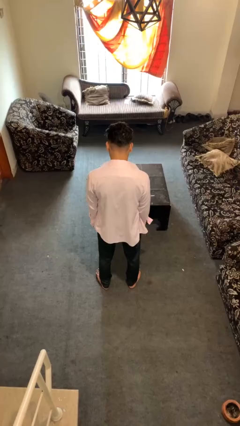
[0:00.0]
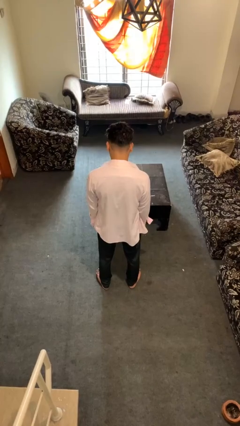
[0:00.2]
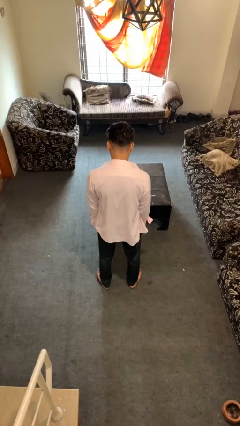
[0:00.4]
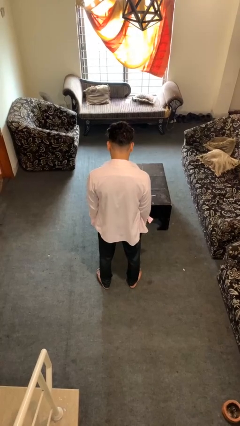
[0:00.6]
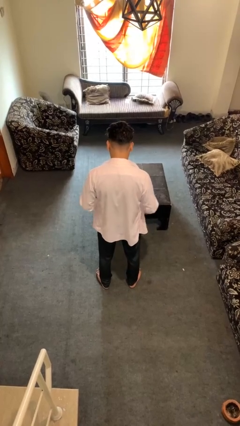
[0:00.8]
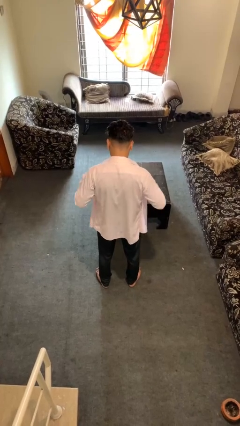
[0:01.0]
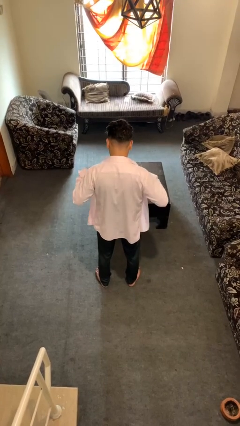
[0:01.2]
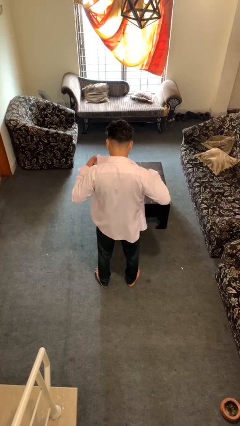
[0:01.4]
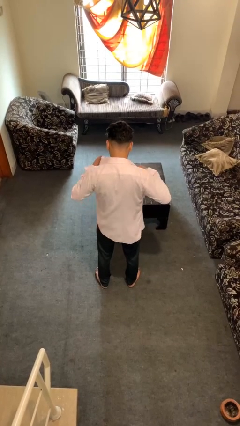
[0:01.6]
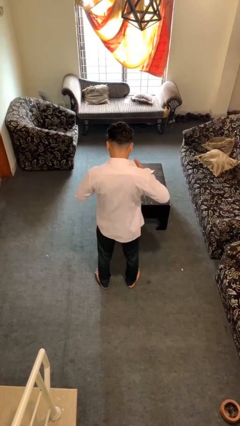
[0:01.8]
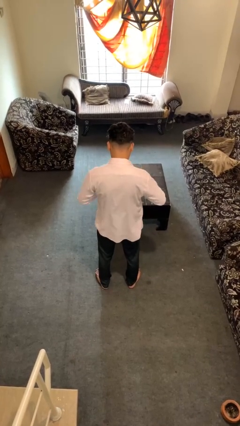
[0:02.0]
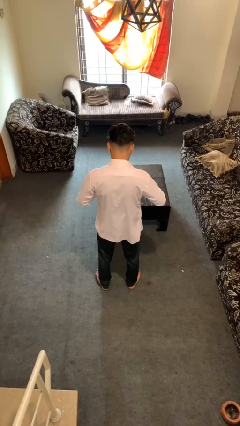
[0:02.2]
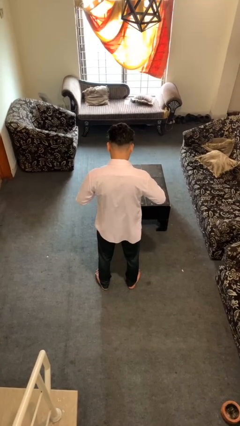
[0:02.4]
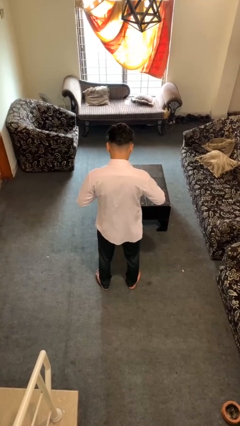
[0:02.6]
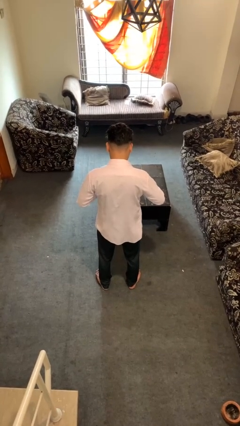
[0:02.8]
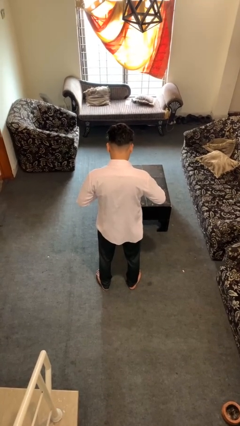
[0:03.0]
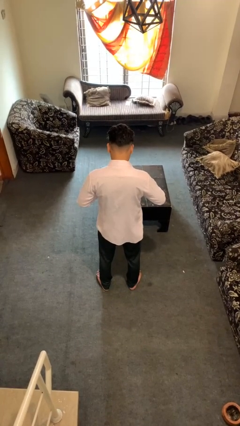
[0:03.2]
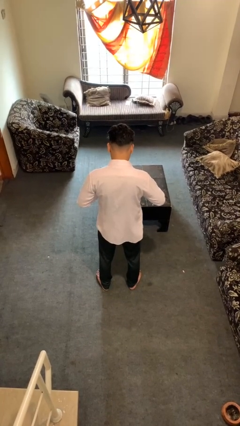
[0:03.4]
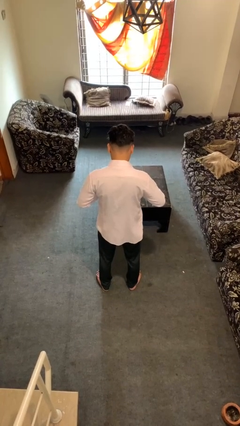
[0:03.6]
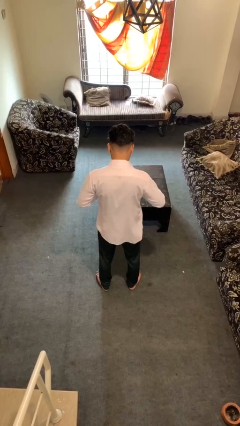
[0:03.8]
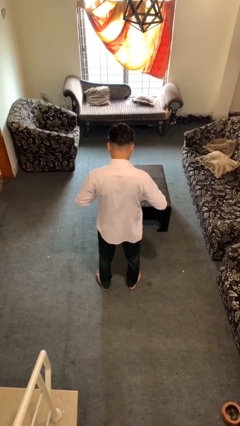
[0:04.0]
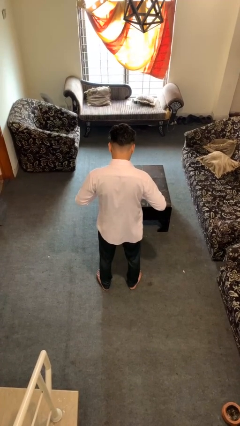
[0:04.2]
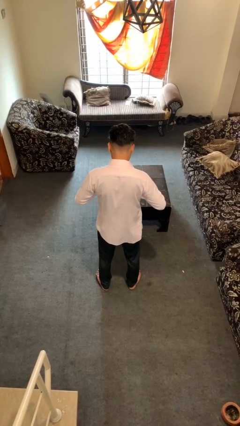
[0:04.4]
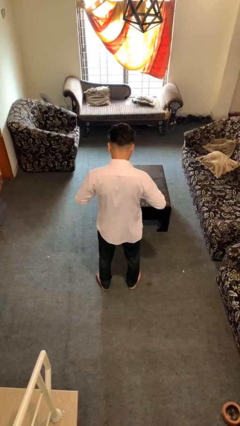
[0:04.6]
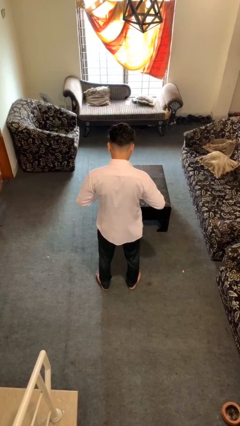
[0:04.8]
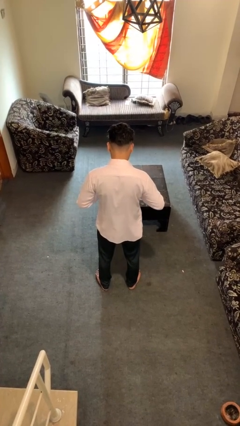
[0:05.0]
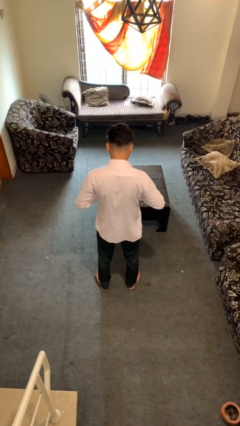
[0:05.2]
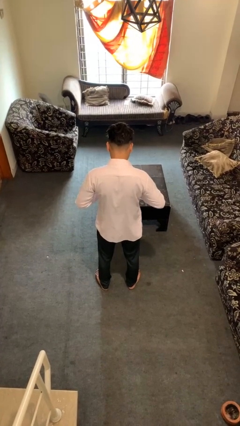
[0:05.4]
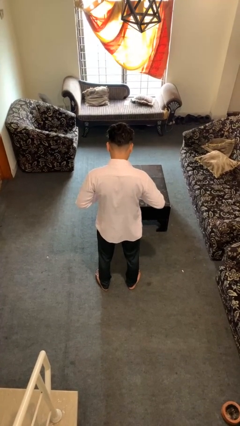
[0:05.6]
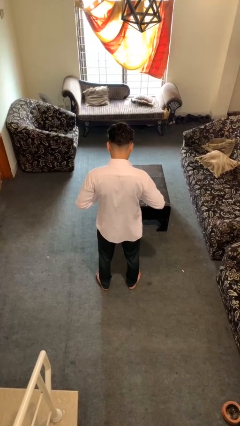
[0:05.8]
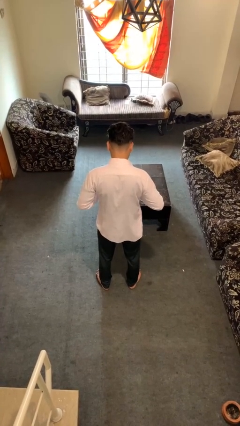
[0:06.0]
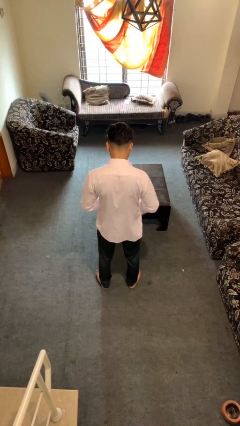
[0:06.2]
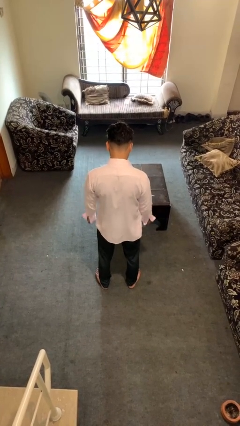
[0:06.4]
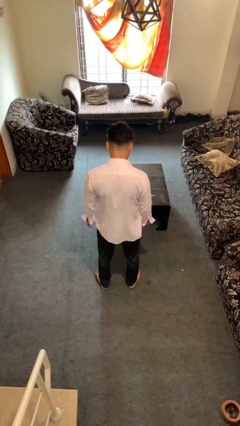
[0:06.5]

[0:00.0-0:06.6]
person buttons shirt

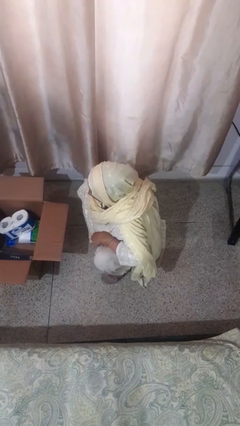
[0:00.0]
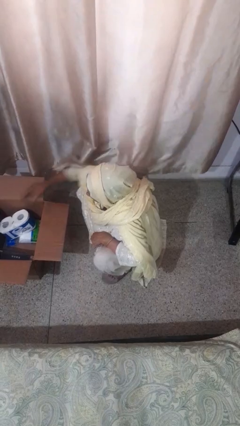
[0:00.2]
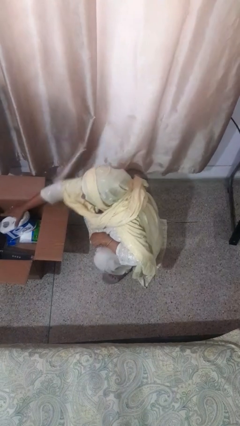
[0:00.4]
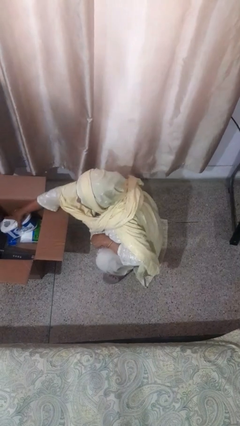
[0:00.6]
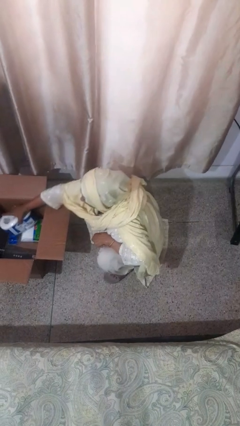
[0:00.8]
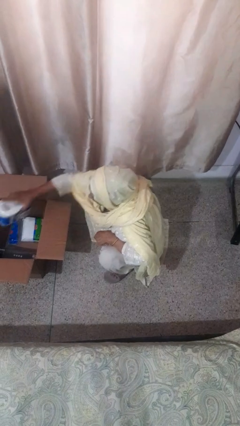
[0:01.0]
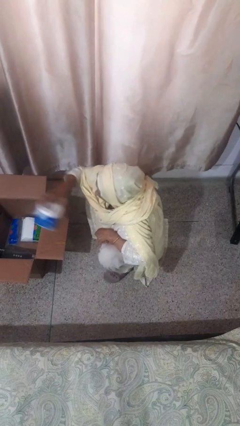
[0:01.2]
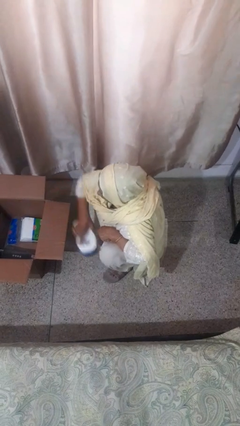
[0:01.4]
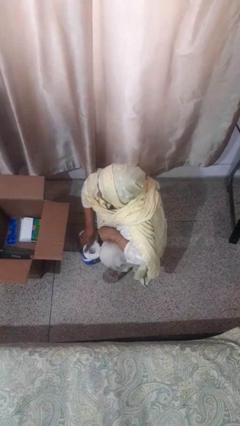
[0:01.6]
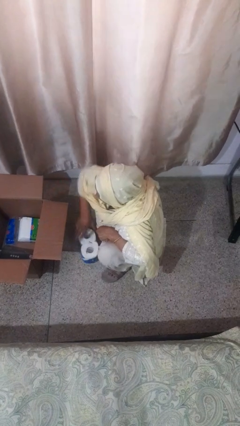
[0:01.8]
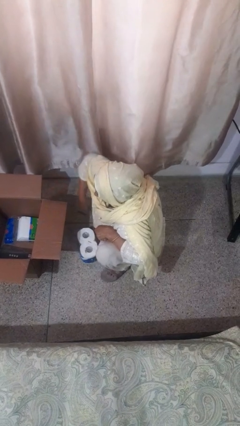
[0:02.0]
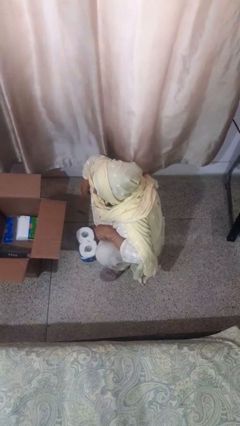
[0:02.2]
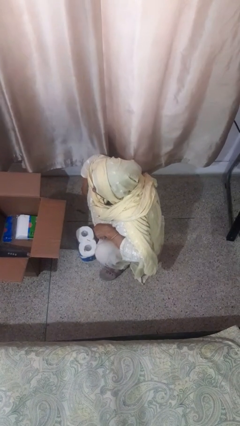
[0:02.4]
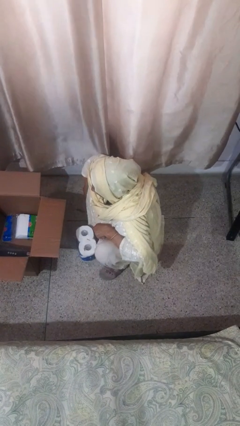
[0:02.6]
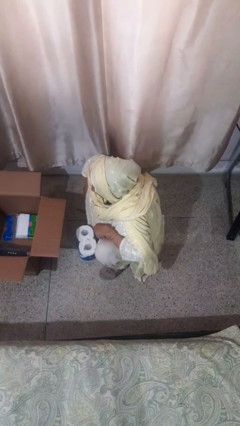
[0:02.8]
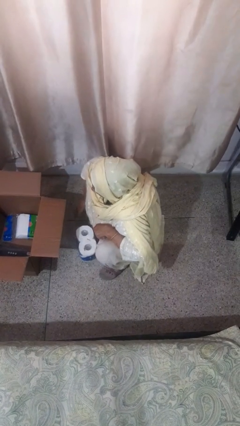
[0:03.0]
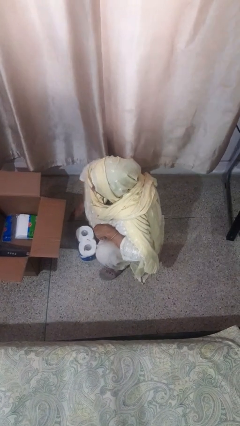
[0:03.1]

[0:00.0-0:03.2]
person takes object from box

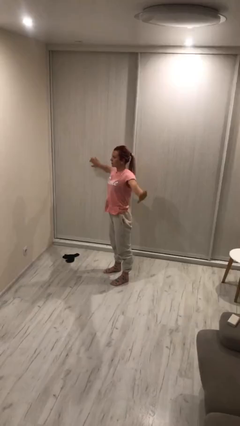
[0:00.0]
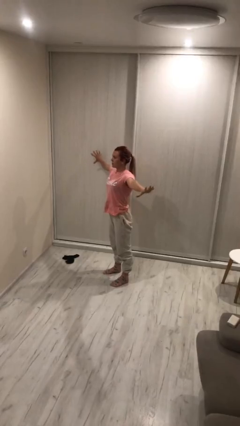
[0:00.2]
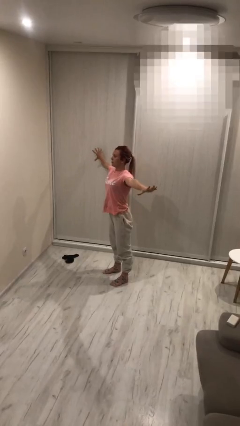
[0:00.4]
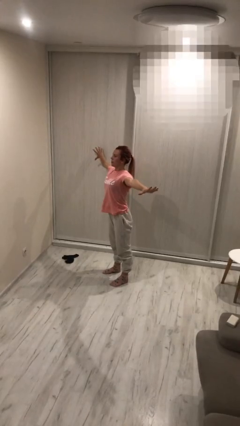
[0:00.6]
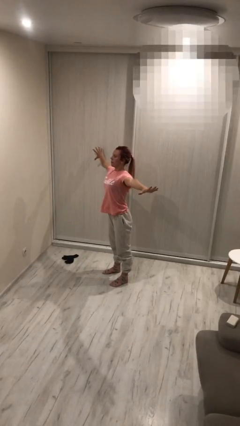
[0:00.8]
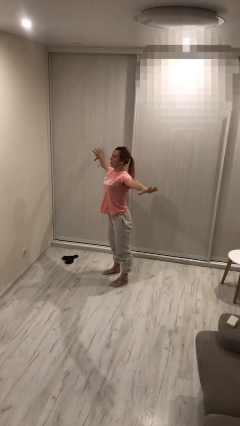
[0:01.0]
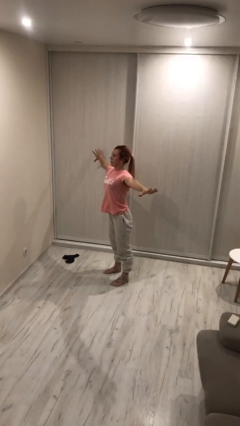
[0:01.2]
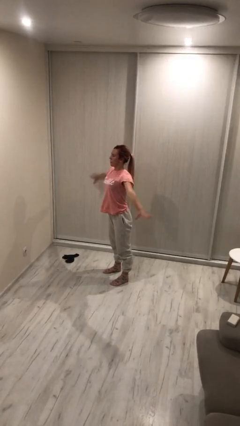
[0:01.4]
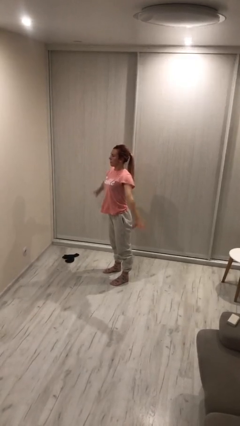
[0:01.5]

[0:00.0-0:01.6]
person stretches arms to side

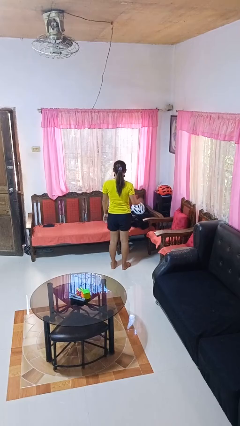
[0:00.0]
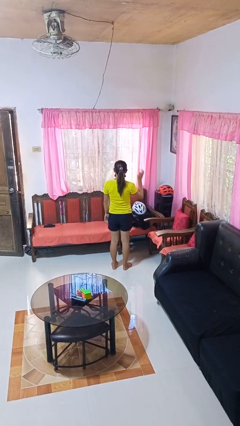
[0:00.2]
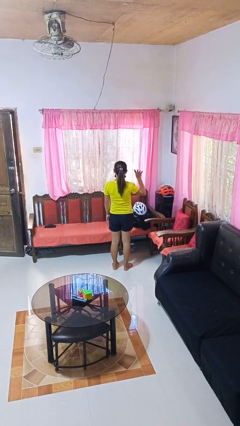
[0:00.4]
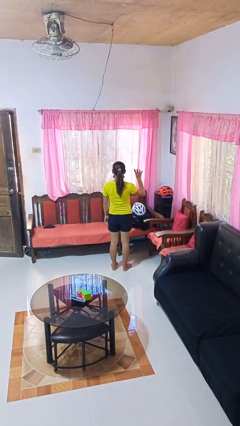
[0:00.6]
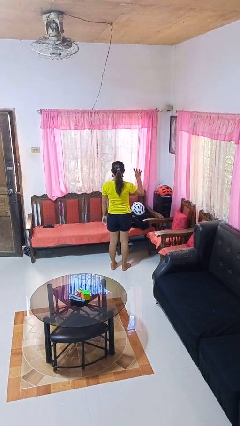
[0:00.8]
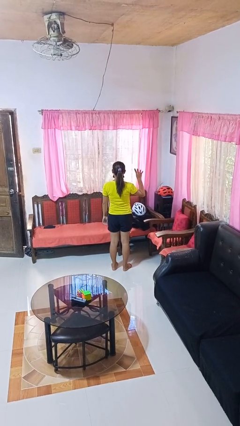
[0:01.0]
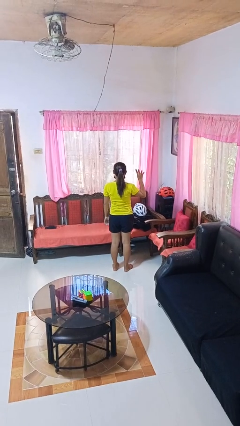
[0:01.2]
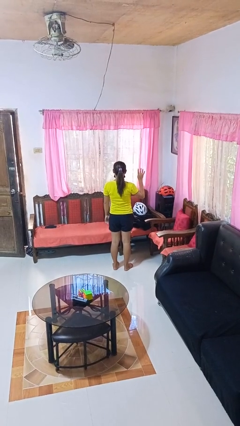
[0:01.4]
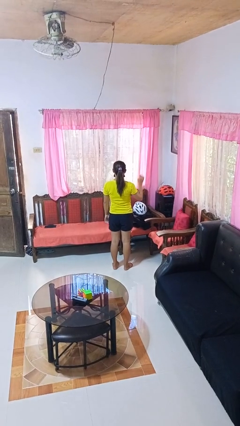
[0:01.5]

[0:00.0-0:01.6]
person gestures number four

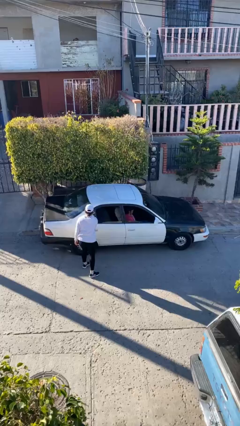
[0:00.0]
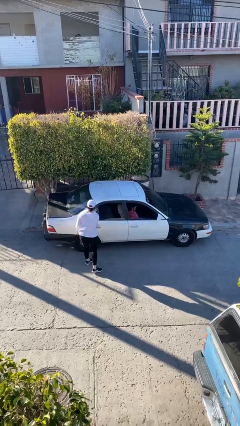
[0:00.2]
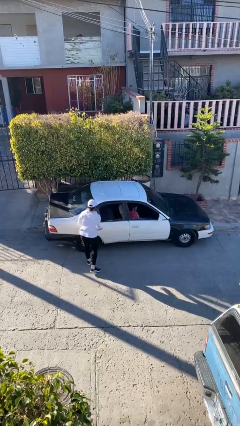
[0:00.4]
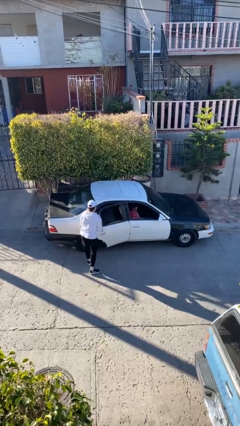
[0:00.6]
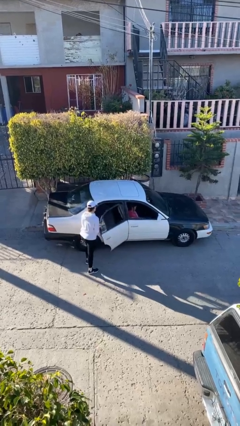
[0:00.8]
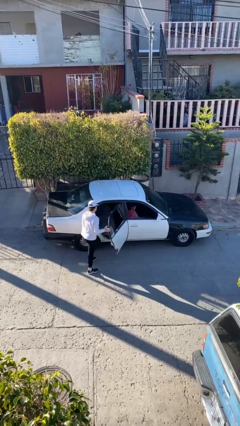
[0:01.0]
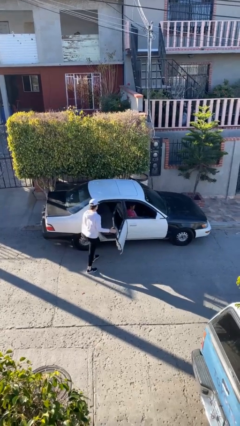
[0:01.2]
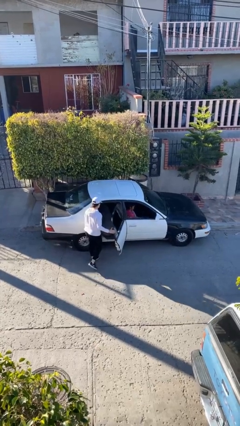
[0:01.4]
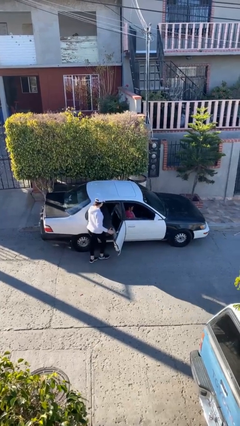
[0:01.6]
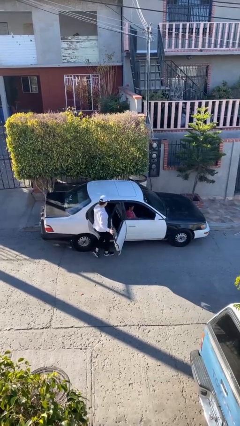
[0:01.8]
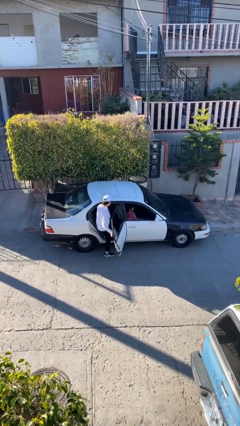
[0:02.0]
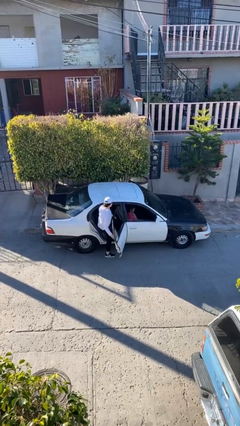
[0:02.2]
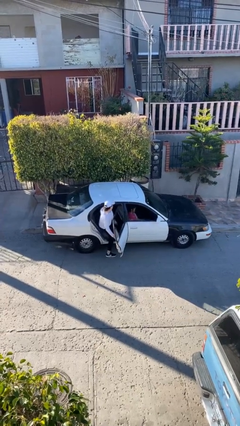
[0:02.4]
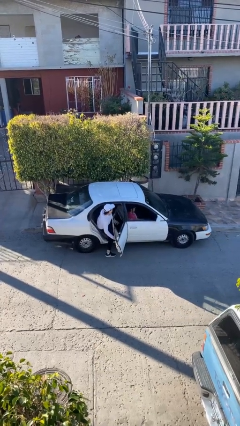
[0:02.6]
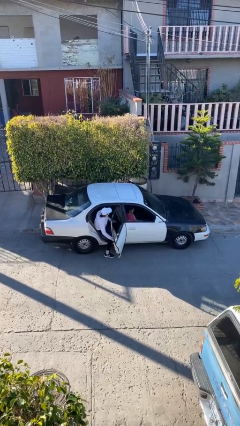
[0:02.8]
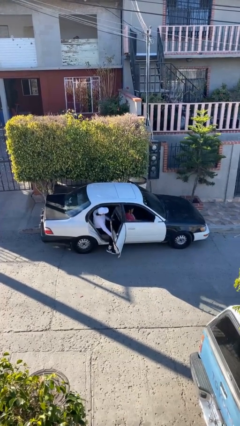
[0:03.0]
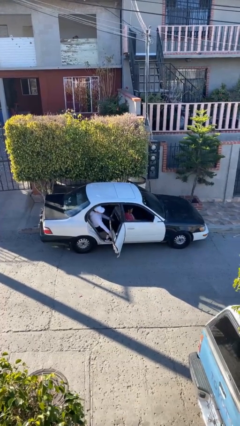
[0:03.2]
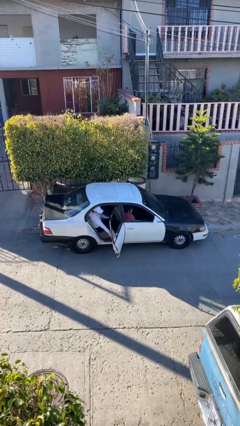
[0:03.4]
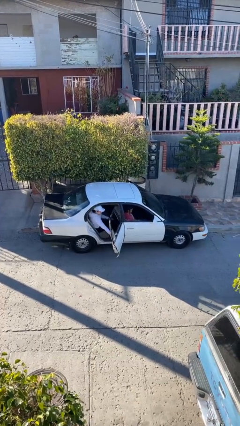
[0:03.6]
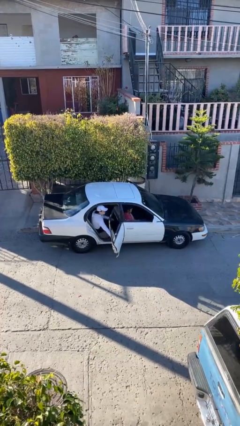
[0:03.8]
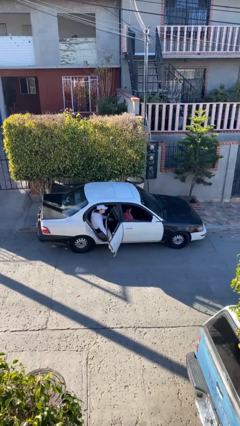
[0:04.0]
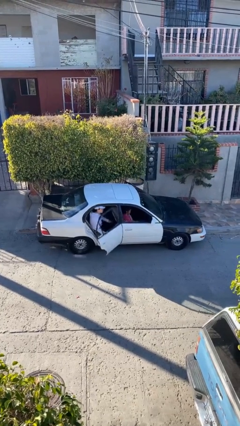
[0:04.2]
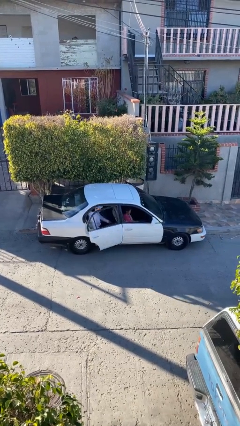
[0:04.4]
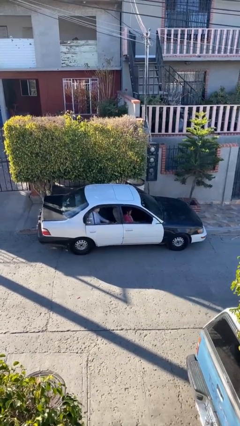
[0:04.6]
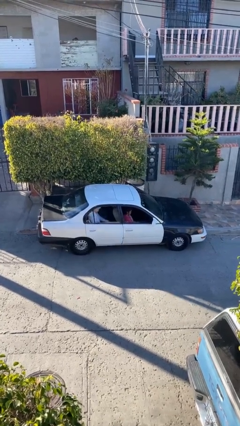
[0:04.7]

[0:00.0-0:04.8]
car picks up person
